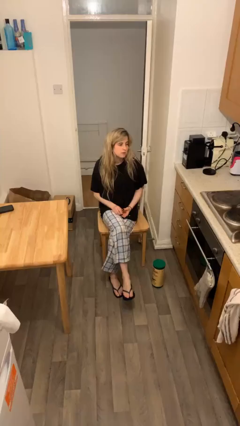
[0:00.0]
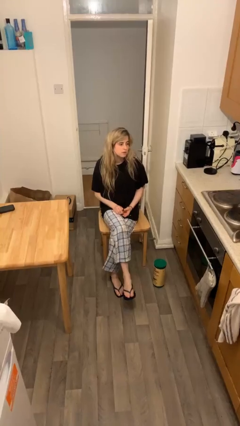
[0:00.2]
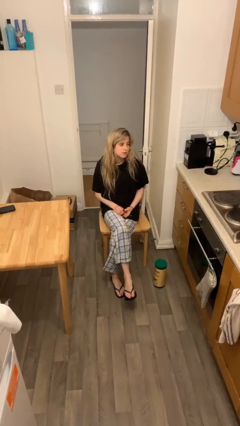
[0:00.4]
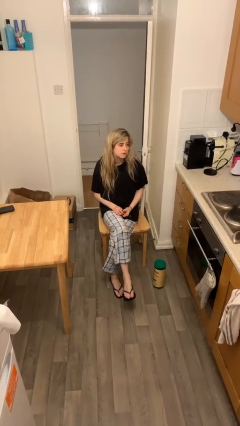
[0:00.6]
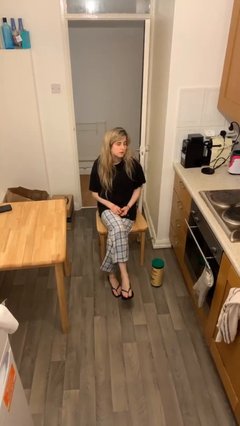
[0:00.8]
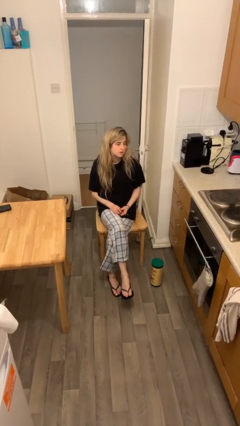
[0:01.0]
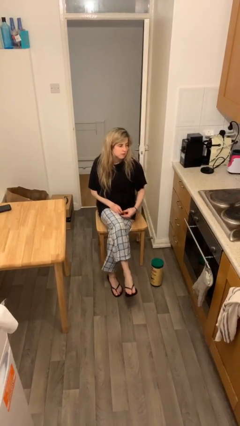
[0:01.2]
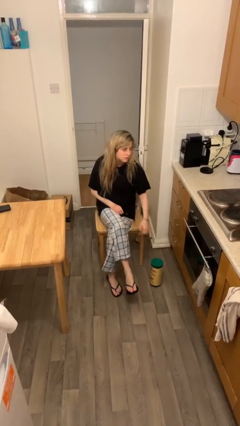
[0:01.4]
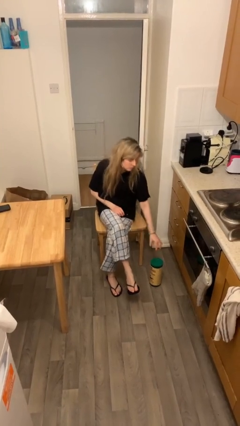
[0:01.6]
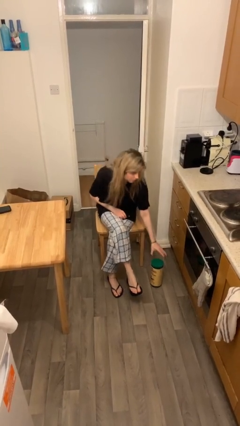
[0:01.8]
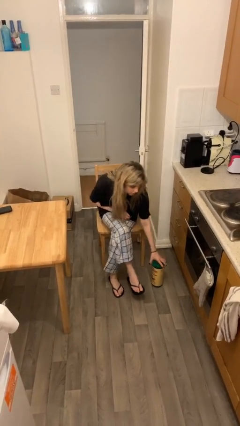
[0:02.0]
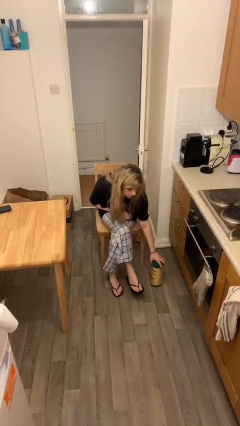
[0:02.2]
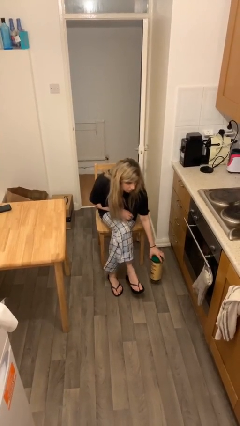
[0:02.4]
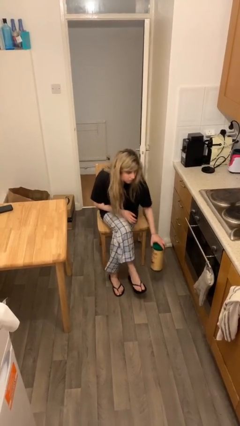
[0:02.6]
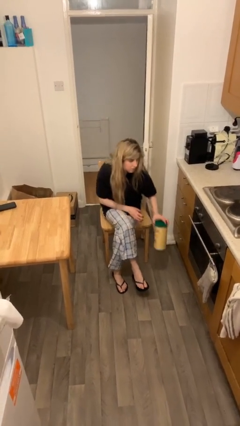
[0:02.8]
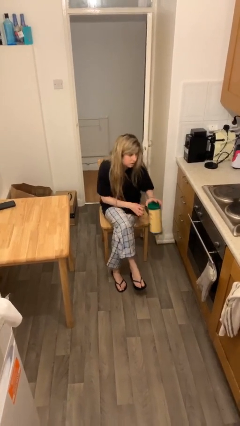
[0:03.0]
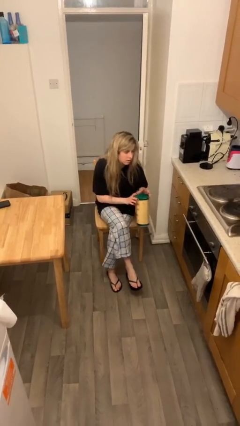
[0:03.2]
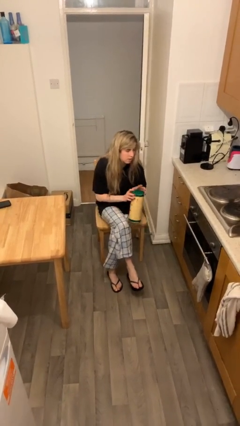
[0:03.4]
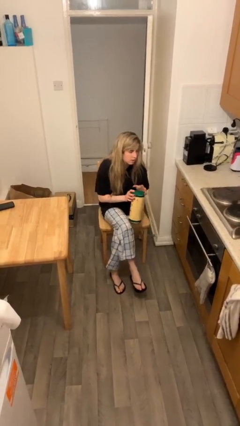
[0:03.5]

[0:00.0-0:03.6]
person picks up object from floor

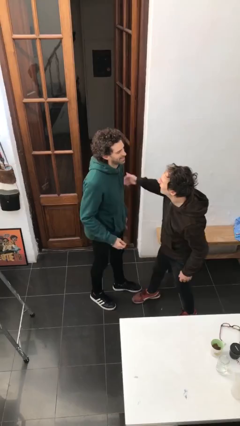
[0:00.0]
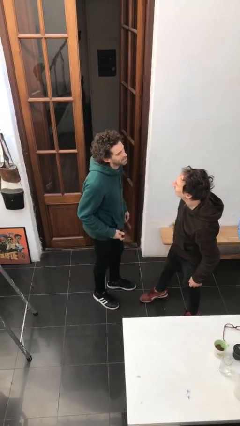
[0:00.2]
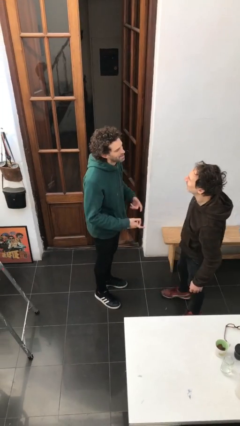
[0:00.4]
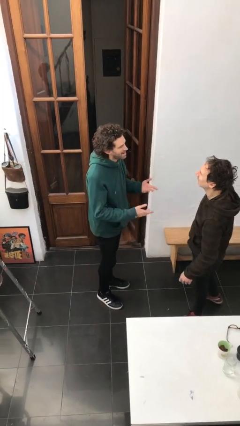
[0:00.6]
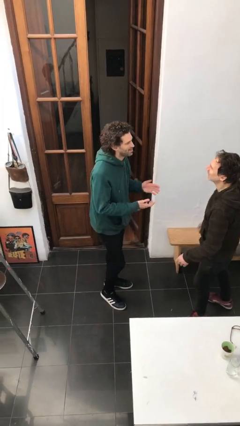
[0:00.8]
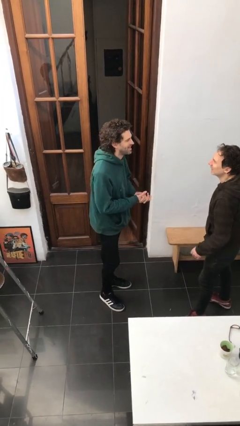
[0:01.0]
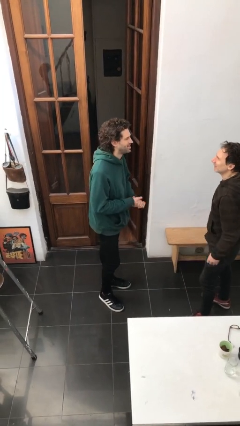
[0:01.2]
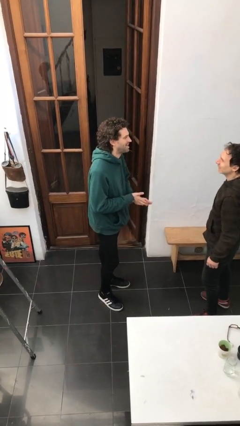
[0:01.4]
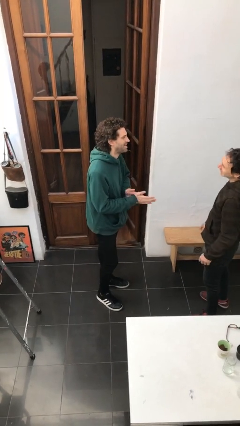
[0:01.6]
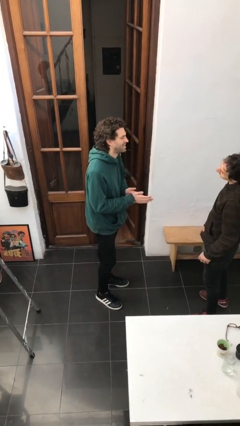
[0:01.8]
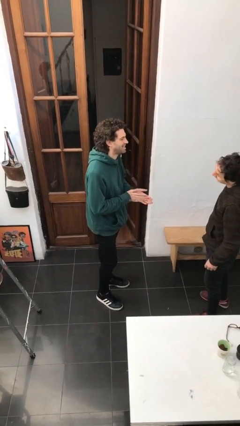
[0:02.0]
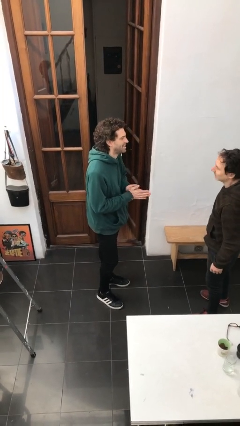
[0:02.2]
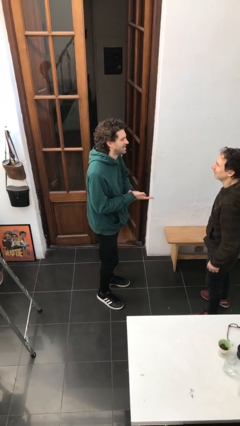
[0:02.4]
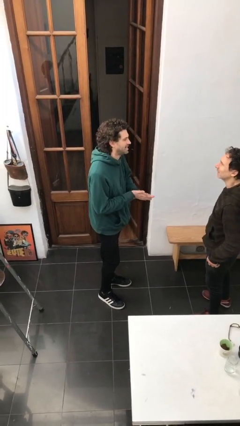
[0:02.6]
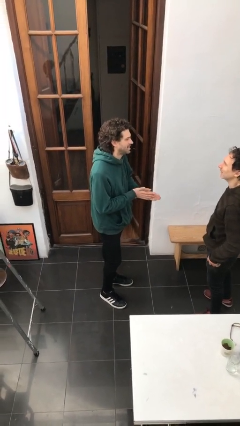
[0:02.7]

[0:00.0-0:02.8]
person talks to person

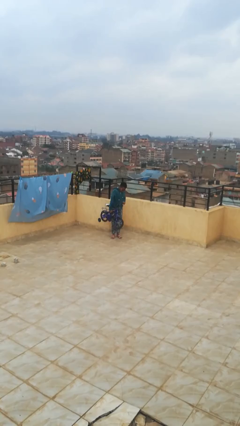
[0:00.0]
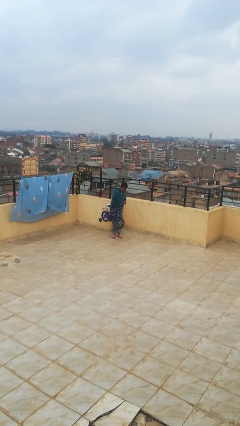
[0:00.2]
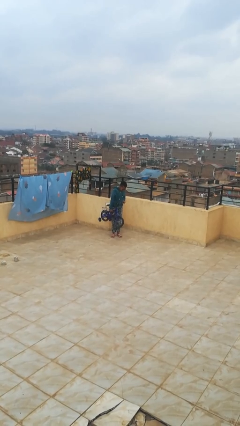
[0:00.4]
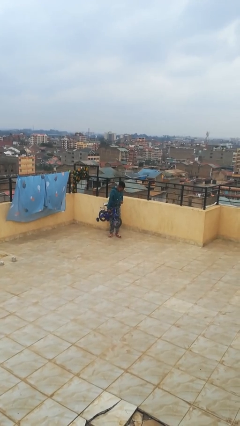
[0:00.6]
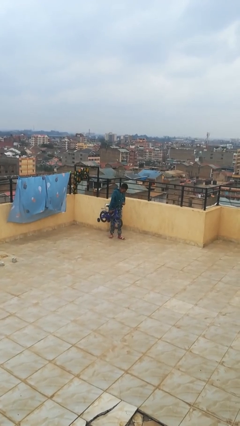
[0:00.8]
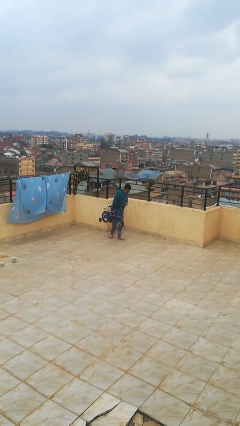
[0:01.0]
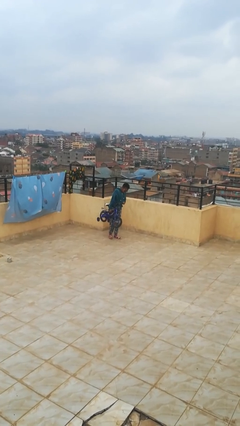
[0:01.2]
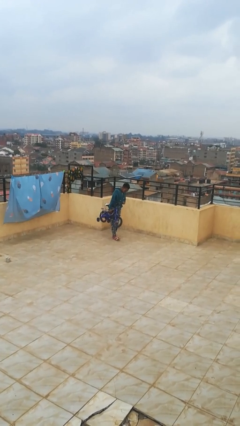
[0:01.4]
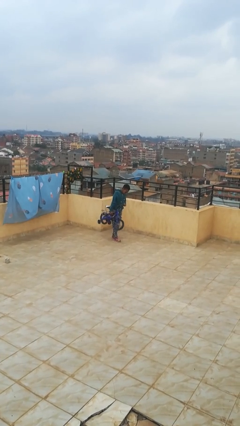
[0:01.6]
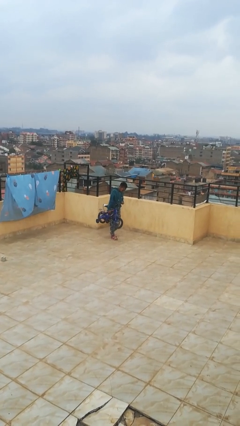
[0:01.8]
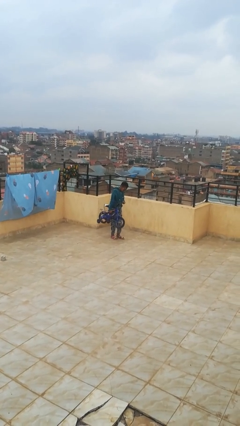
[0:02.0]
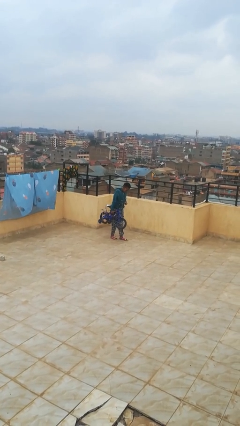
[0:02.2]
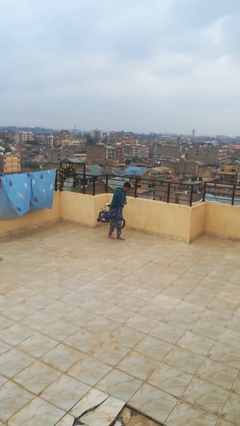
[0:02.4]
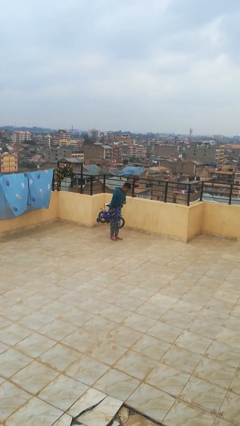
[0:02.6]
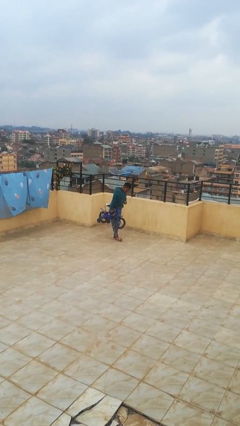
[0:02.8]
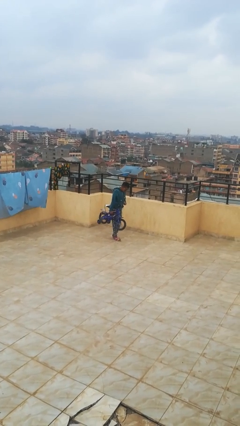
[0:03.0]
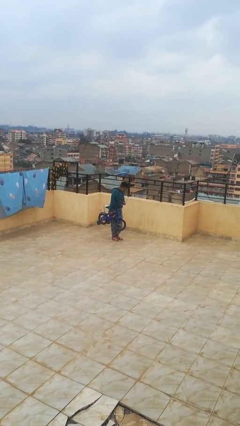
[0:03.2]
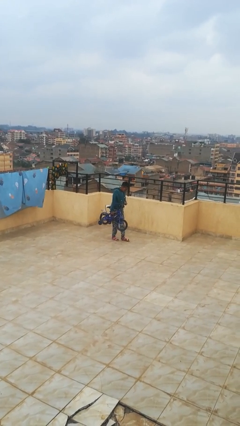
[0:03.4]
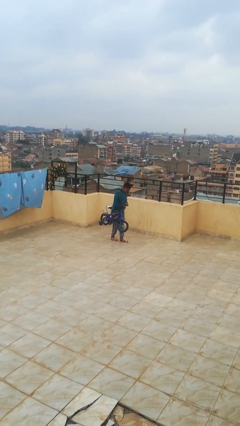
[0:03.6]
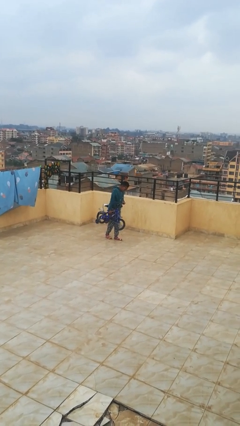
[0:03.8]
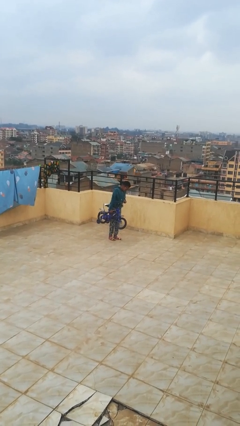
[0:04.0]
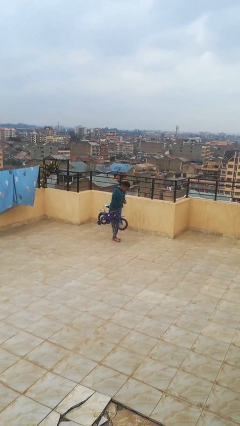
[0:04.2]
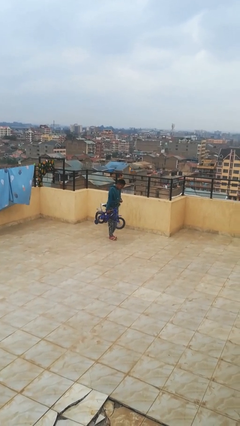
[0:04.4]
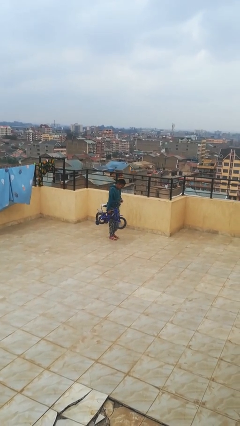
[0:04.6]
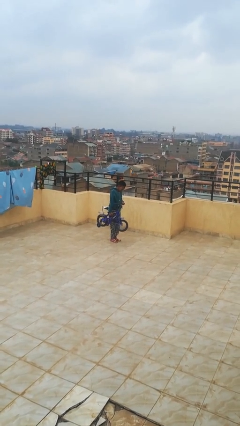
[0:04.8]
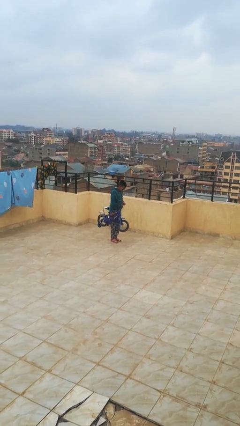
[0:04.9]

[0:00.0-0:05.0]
person carries bicycle

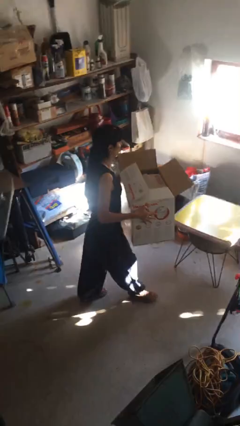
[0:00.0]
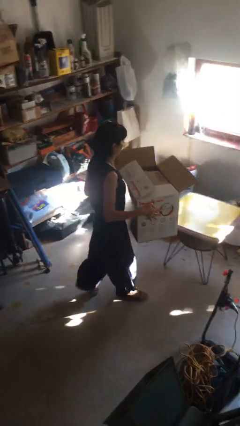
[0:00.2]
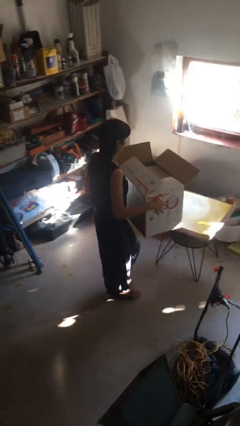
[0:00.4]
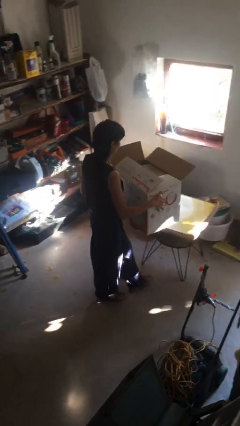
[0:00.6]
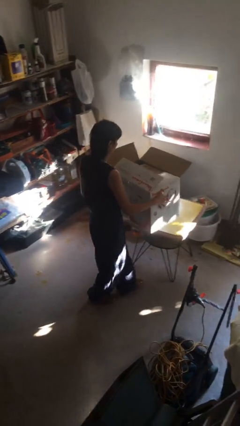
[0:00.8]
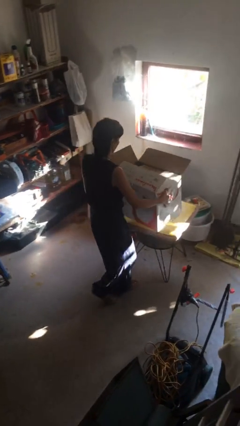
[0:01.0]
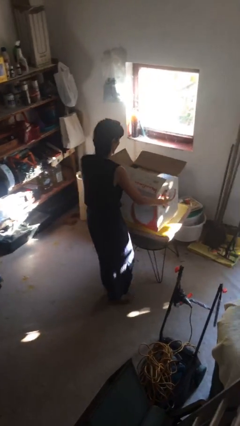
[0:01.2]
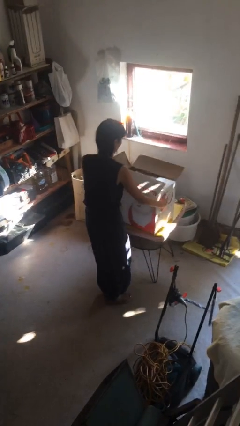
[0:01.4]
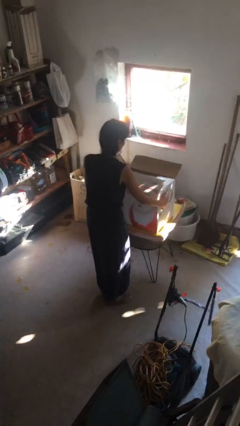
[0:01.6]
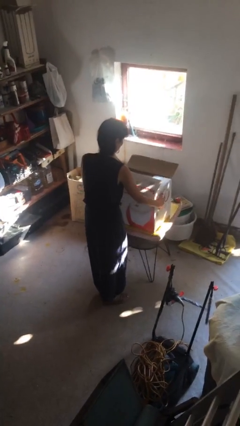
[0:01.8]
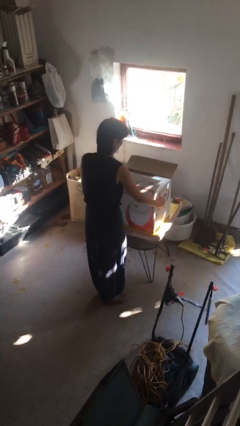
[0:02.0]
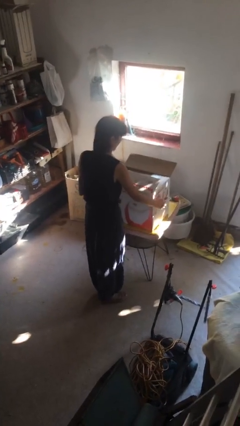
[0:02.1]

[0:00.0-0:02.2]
person puts down object on table

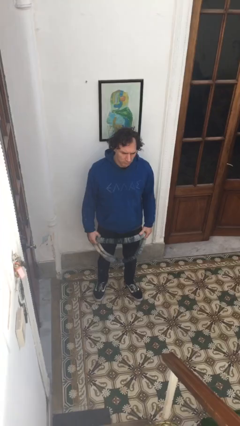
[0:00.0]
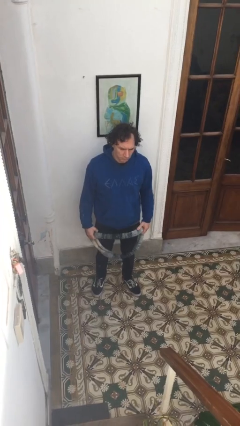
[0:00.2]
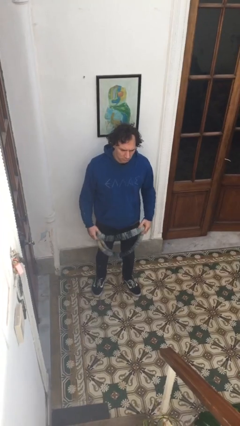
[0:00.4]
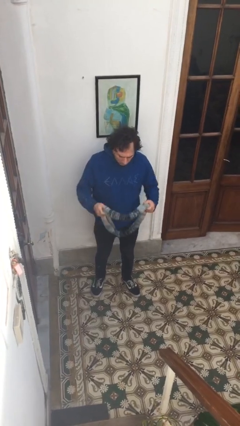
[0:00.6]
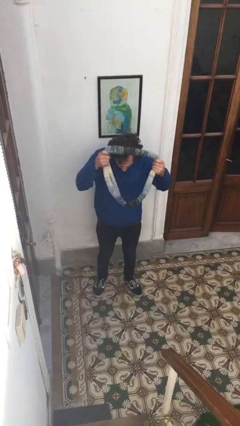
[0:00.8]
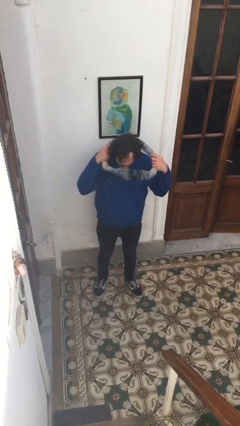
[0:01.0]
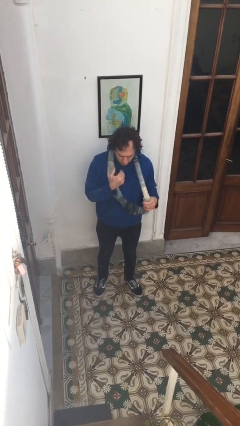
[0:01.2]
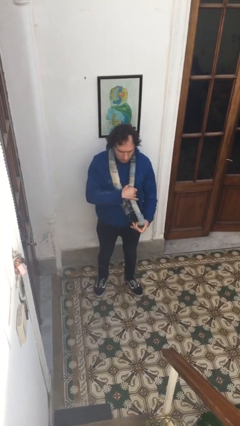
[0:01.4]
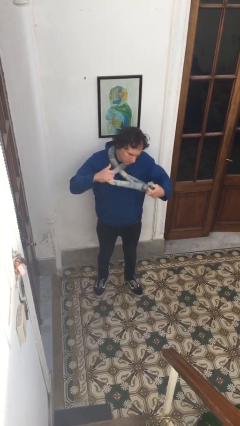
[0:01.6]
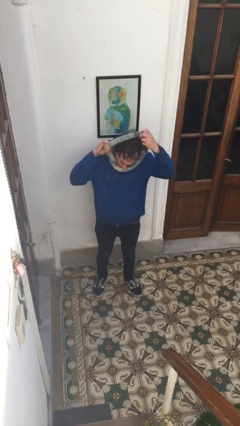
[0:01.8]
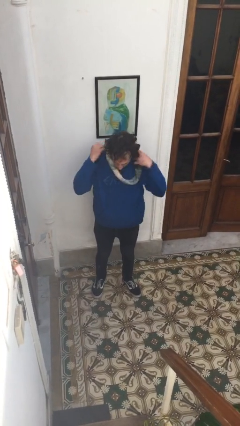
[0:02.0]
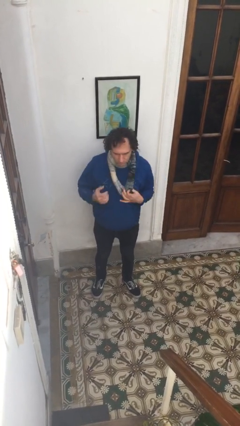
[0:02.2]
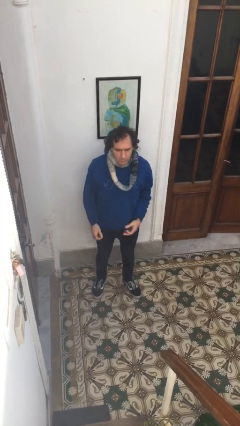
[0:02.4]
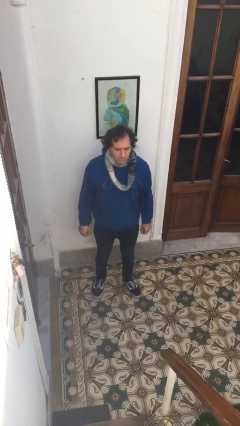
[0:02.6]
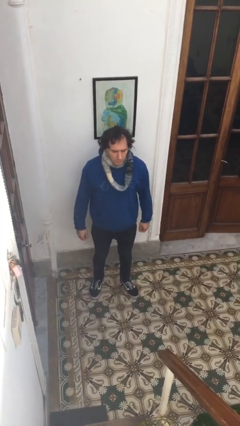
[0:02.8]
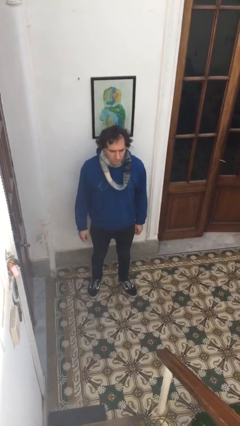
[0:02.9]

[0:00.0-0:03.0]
person puts on scarf

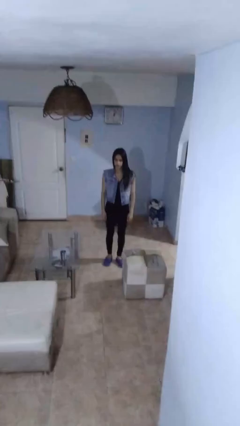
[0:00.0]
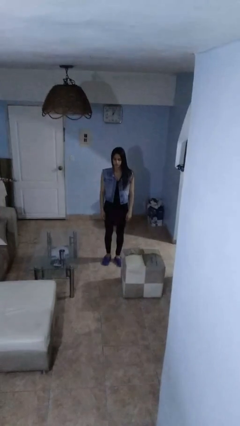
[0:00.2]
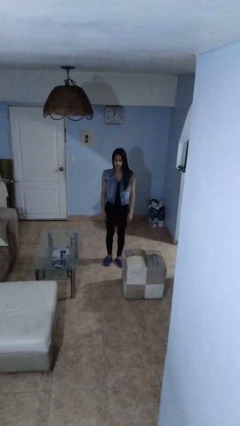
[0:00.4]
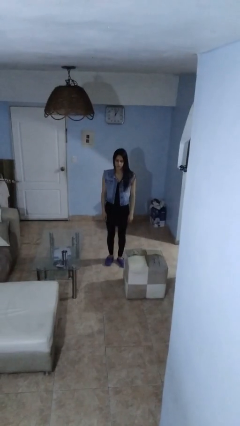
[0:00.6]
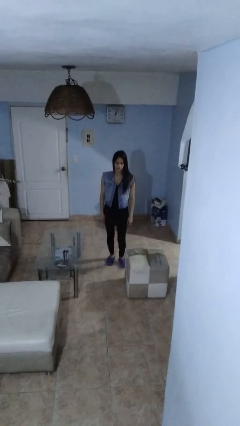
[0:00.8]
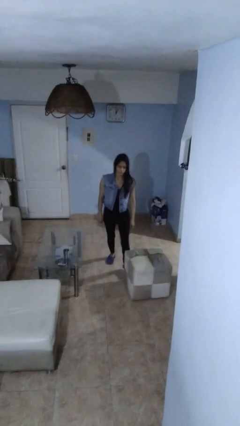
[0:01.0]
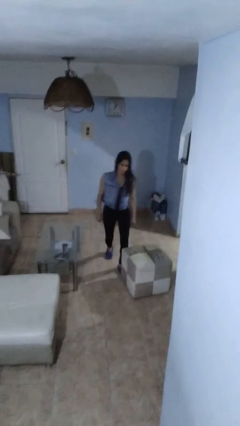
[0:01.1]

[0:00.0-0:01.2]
person trips on object on floor
